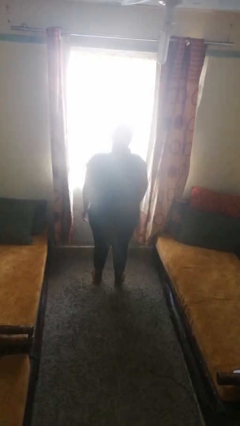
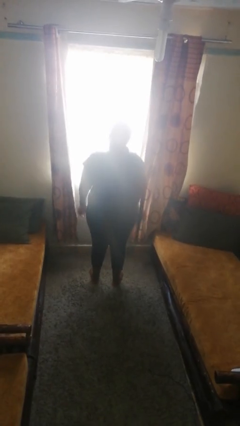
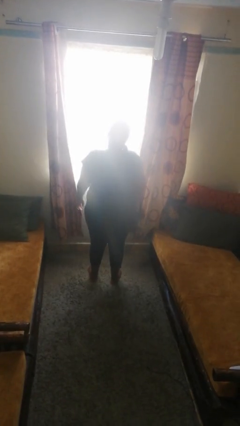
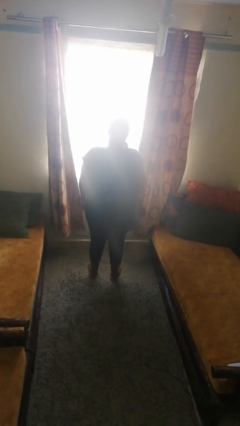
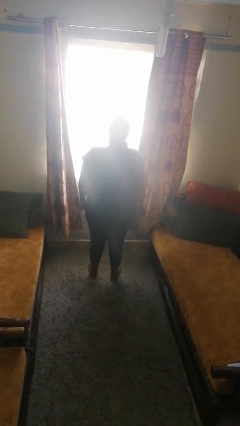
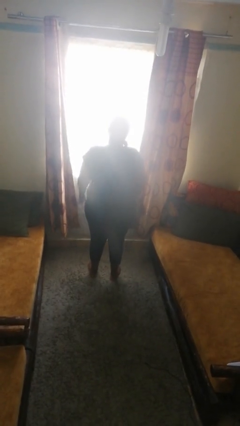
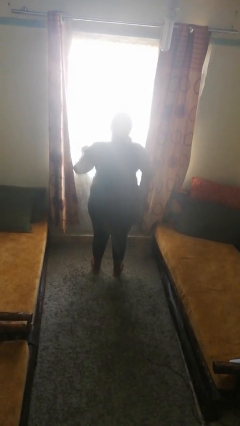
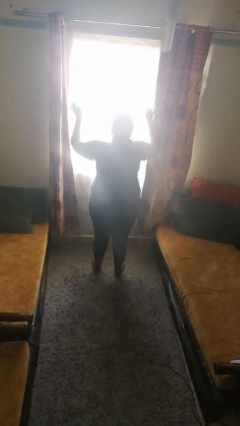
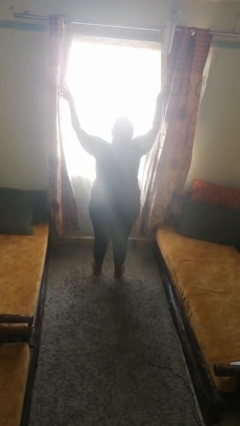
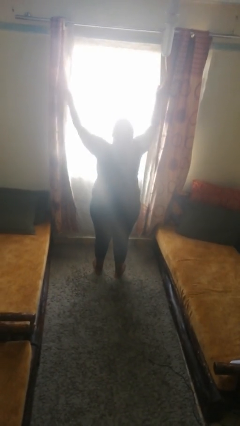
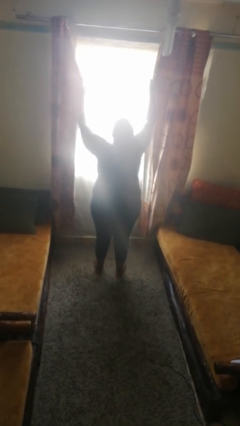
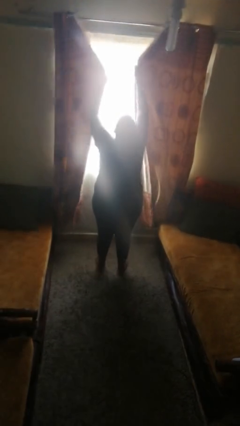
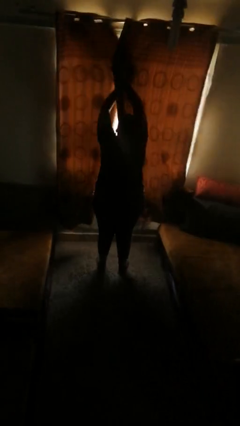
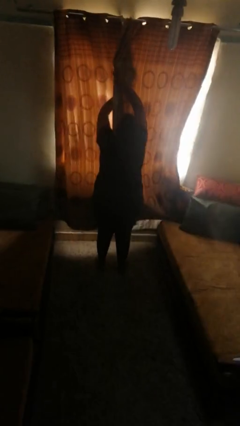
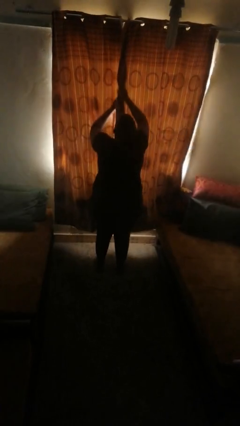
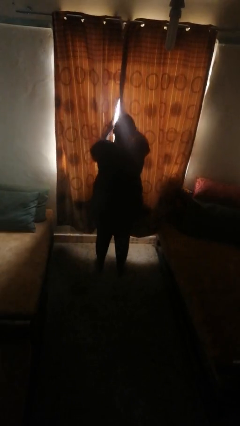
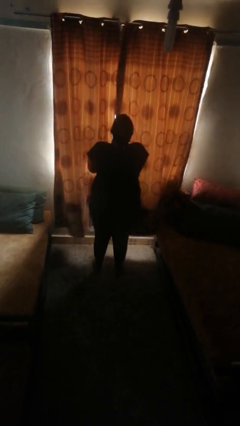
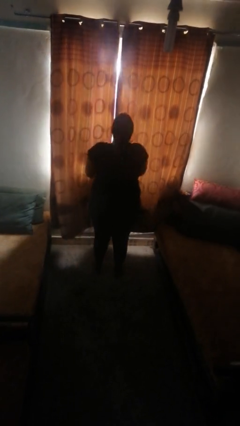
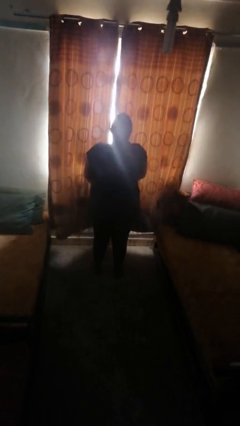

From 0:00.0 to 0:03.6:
person closes curtains

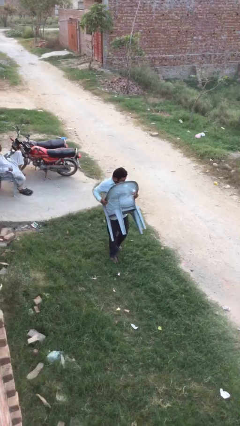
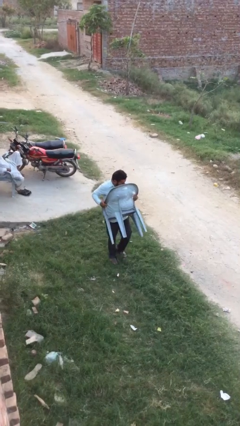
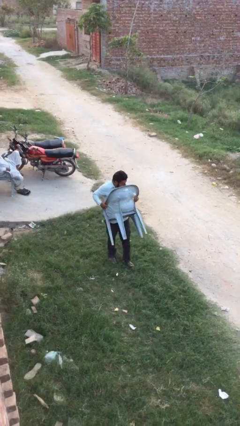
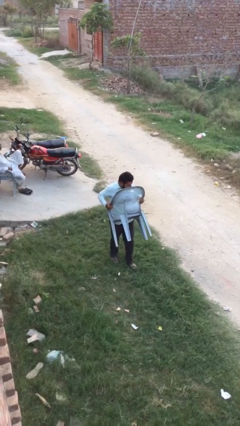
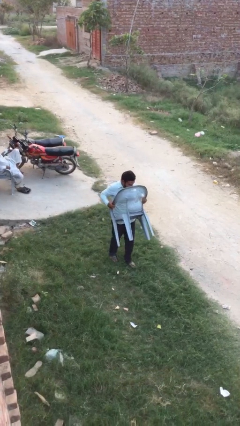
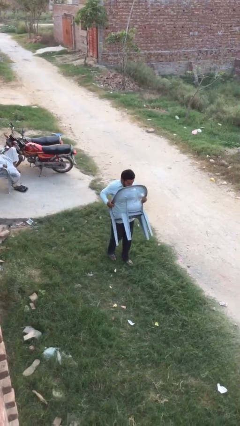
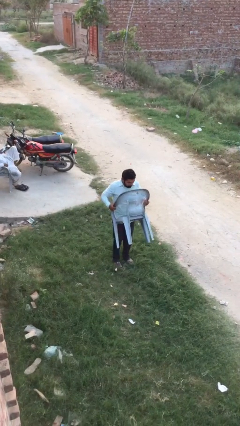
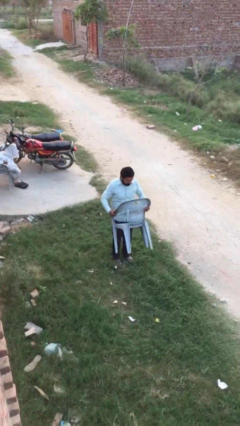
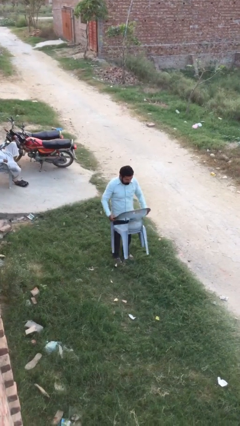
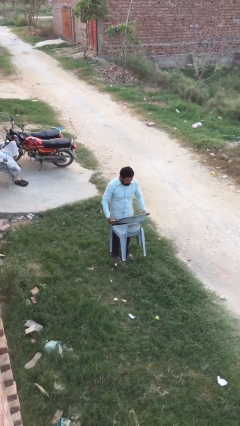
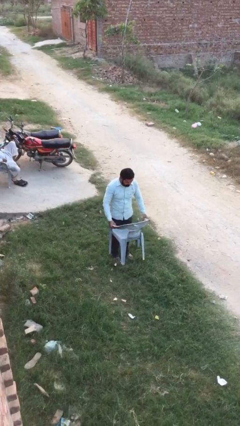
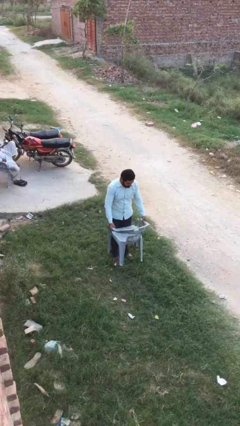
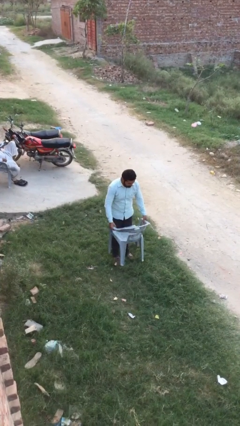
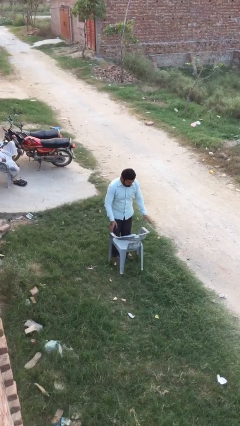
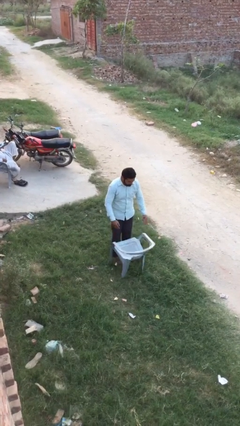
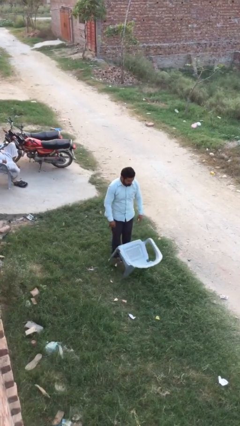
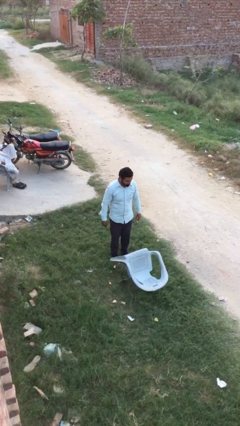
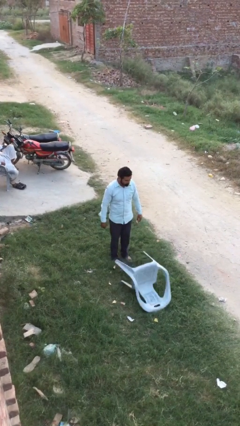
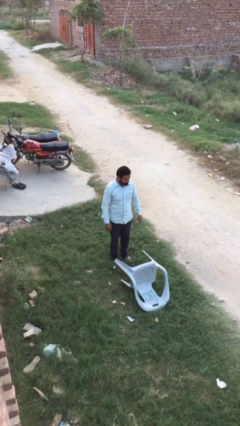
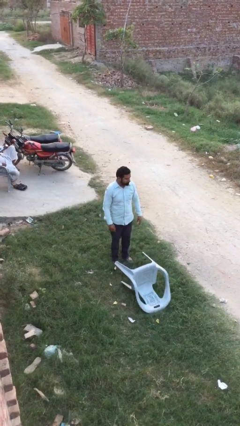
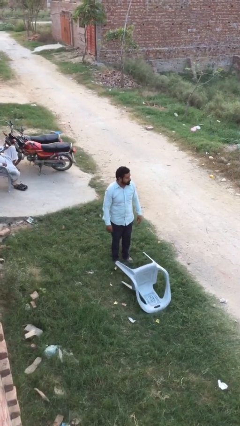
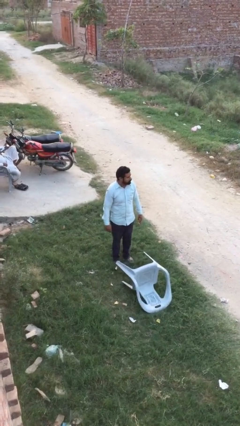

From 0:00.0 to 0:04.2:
person puts down object on floor

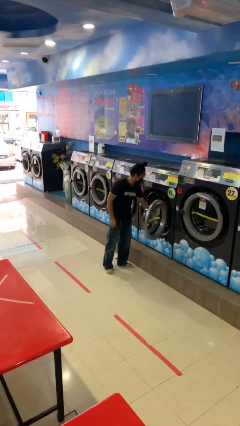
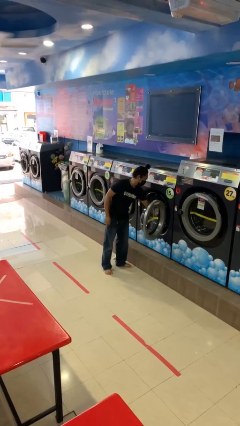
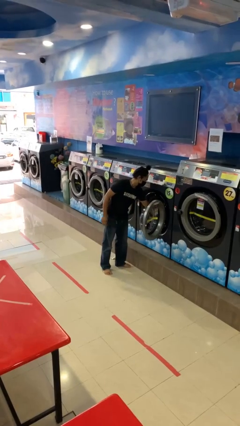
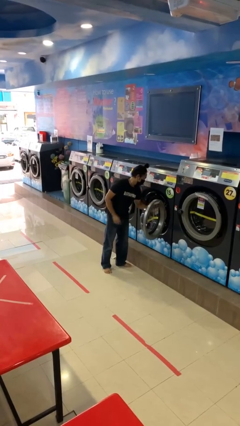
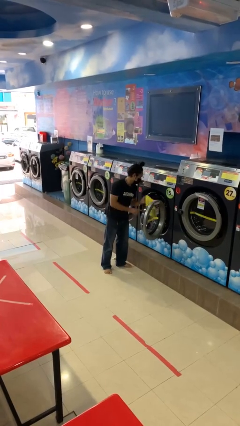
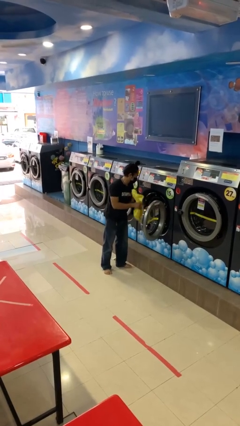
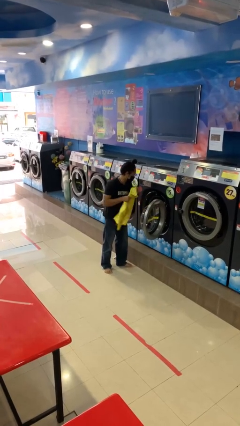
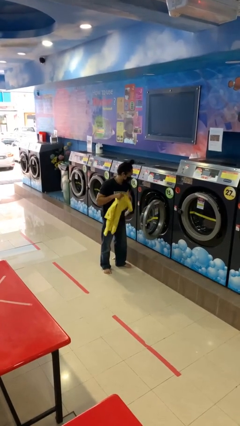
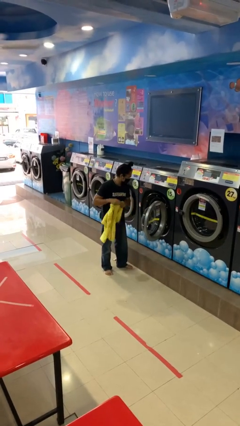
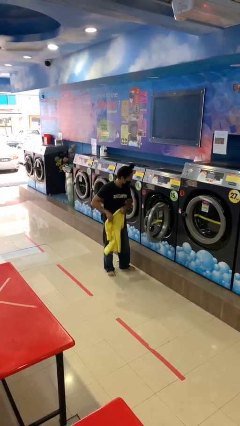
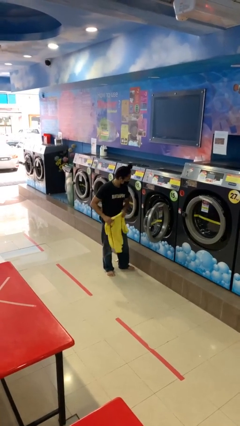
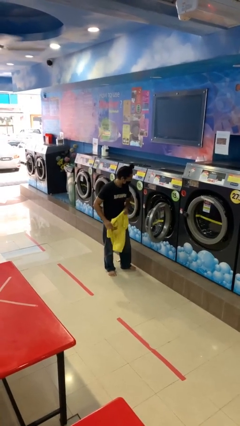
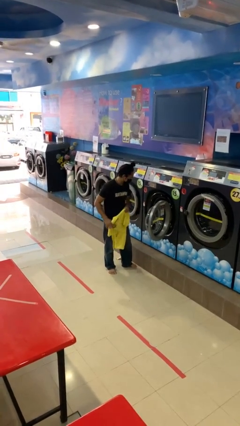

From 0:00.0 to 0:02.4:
person unloads clotheswasher

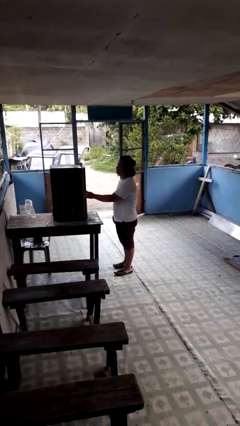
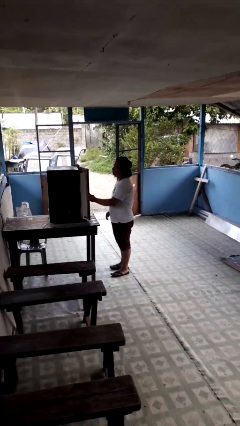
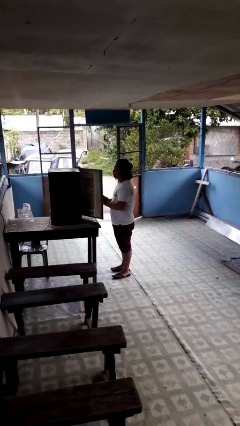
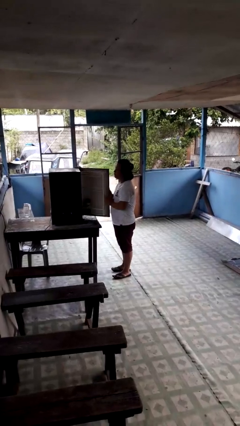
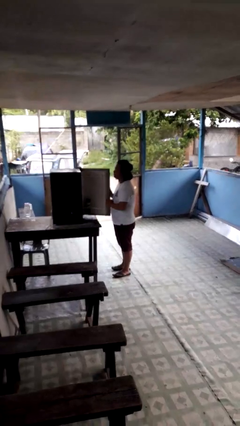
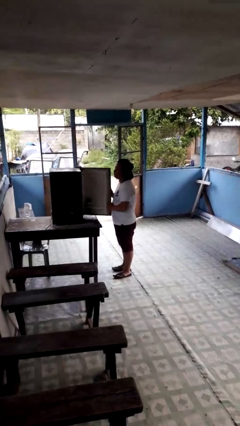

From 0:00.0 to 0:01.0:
person opens refrigerator

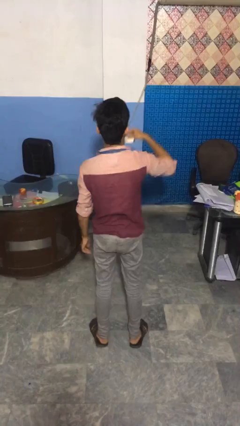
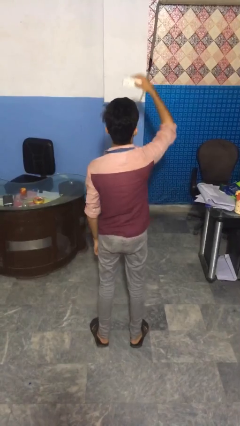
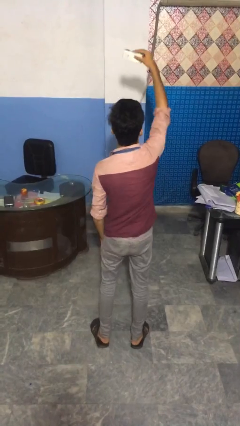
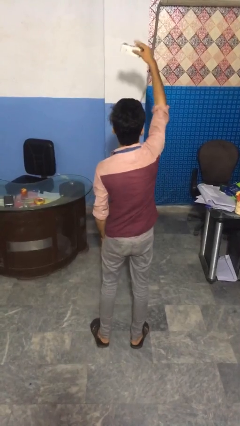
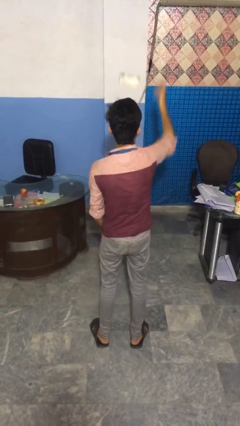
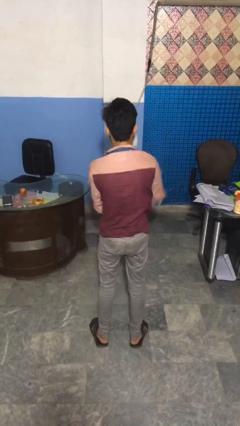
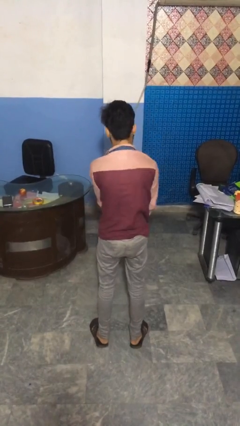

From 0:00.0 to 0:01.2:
person drops object

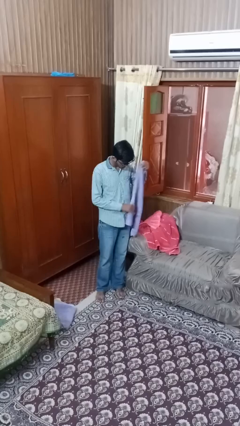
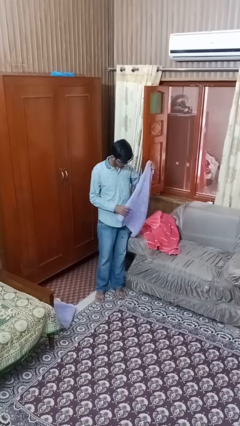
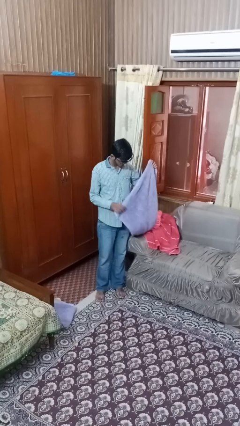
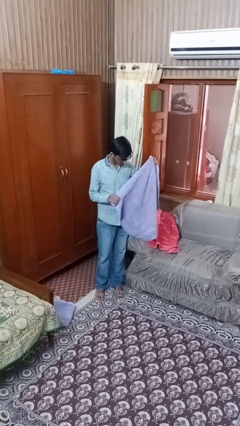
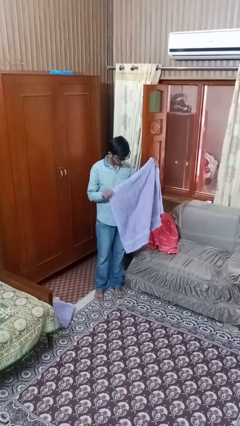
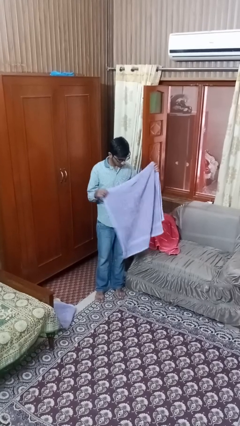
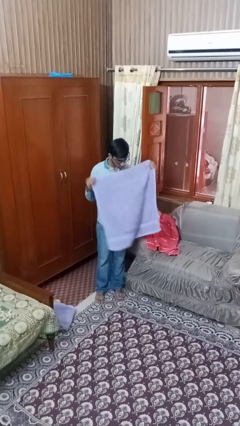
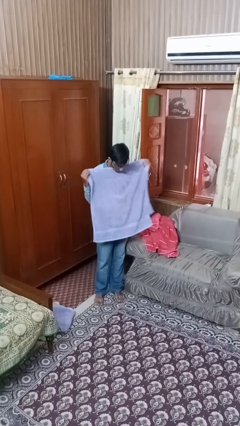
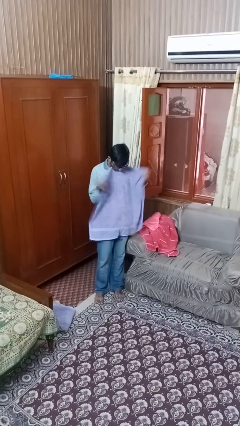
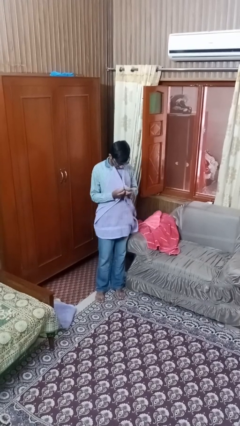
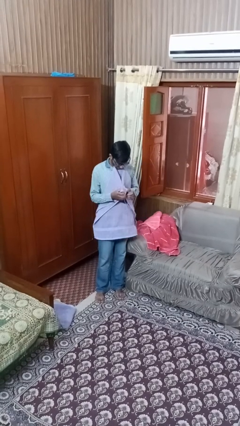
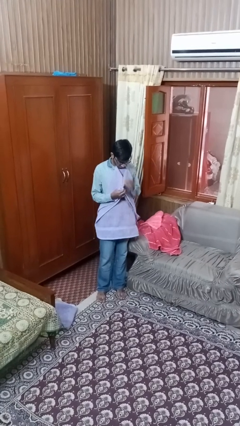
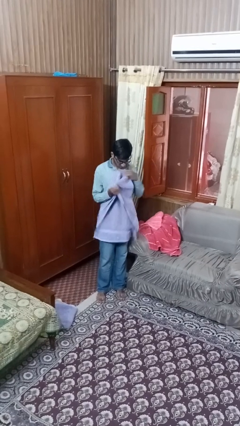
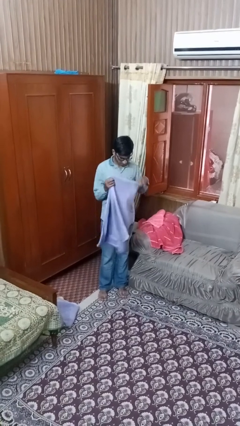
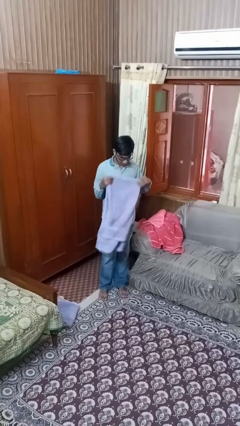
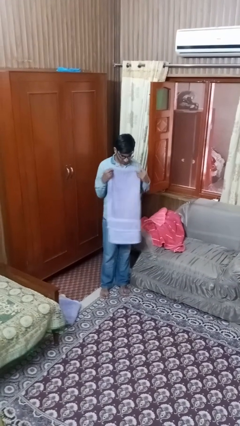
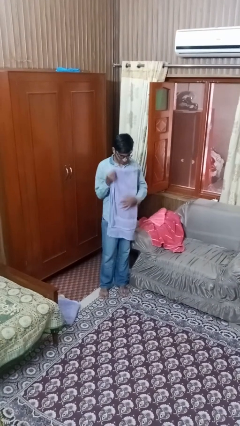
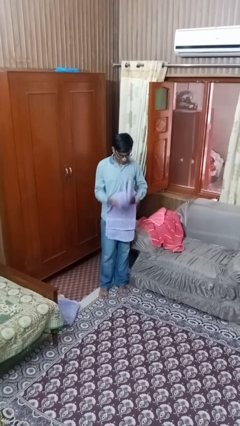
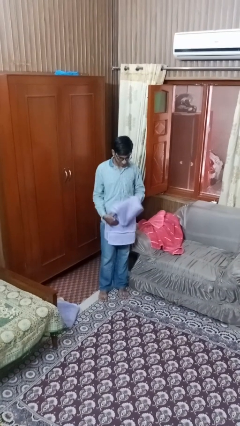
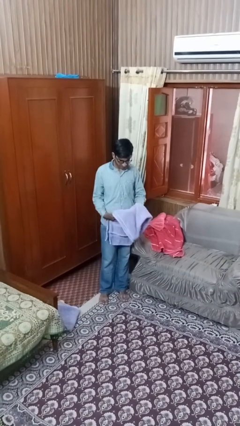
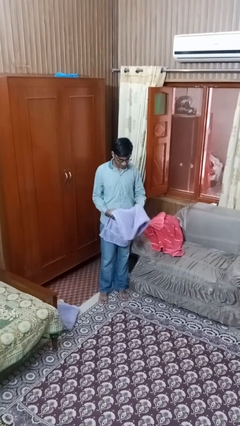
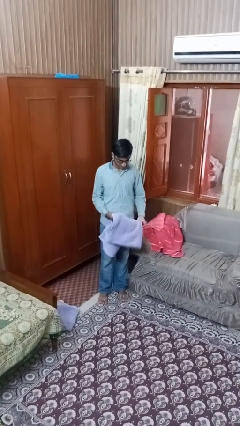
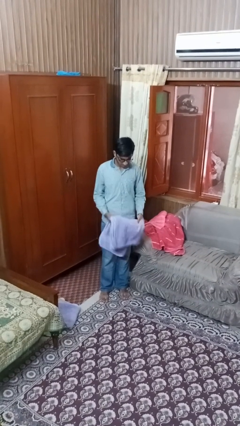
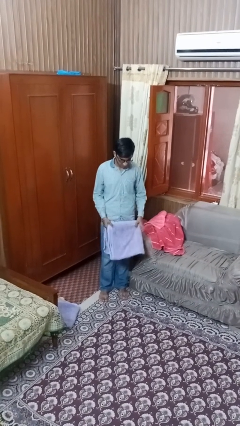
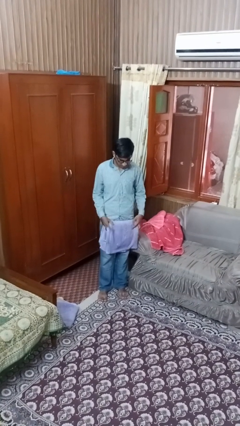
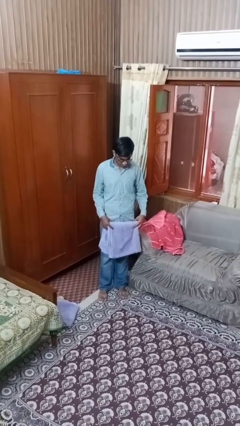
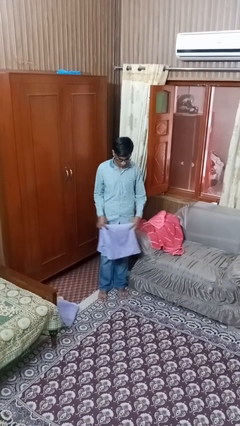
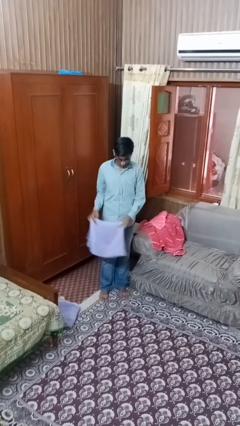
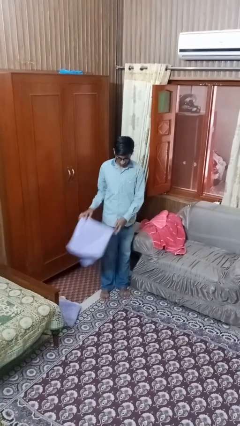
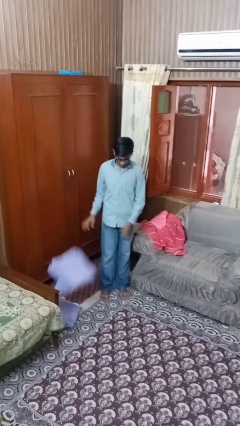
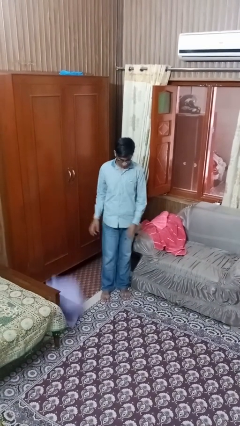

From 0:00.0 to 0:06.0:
person folds towel
